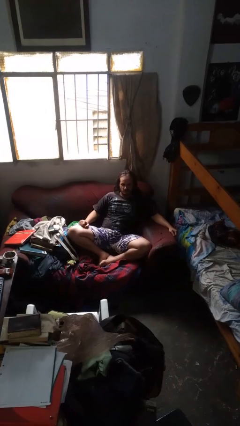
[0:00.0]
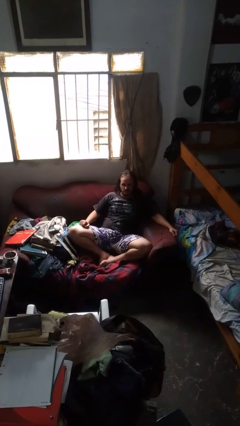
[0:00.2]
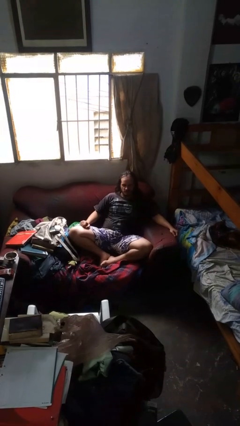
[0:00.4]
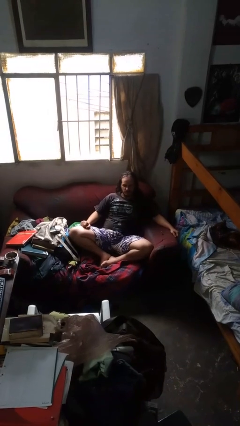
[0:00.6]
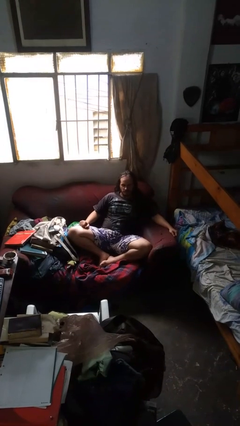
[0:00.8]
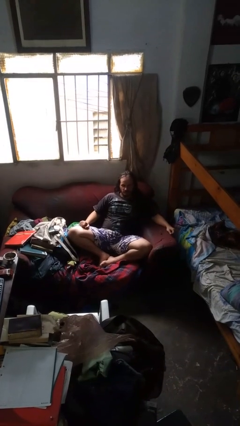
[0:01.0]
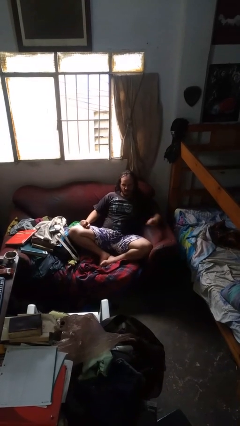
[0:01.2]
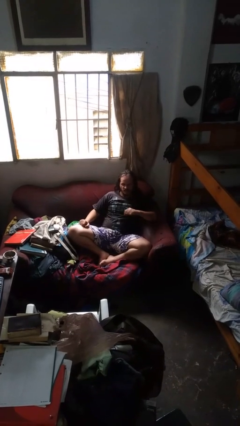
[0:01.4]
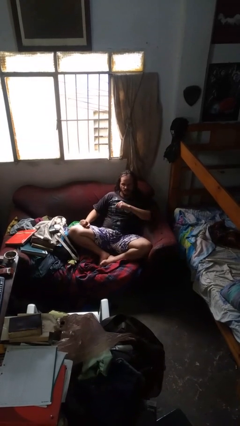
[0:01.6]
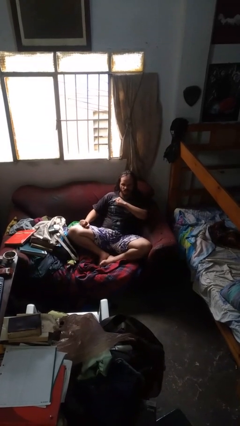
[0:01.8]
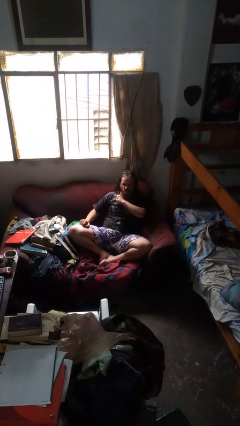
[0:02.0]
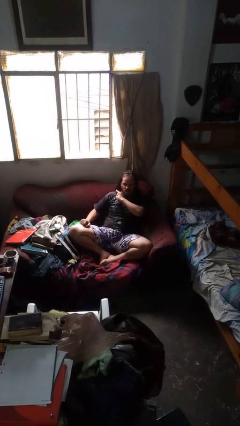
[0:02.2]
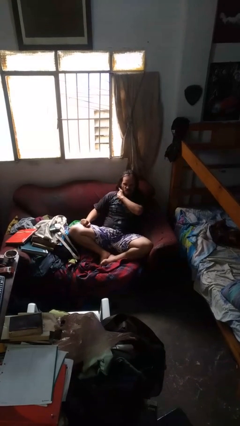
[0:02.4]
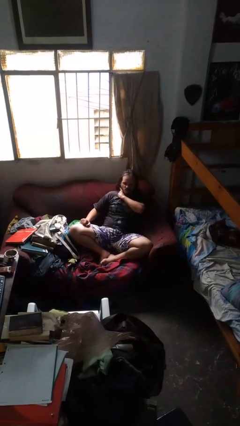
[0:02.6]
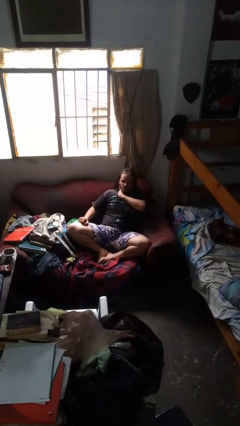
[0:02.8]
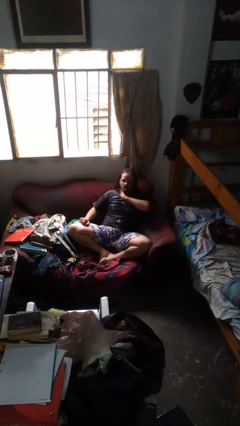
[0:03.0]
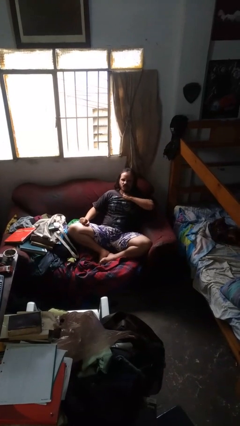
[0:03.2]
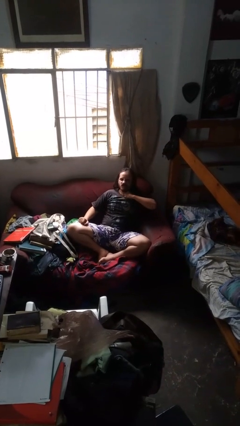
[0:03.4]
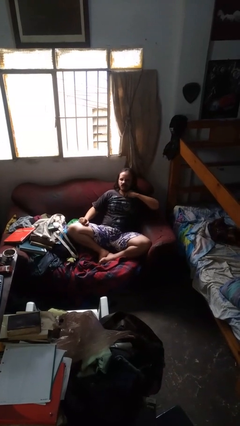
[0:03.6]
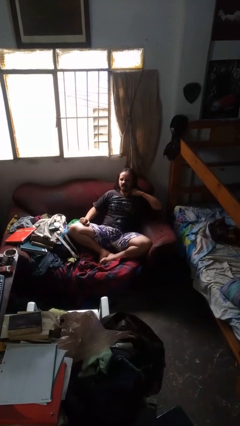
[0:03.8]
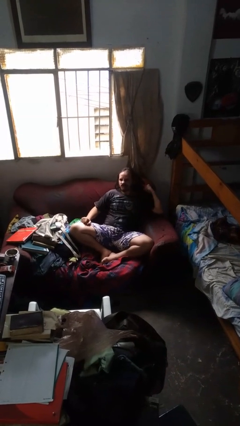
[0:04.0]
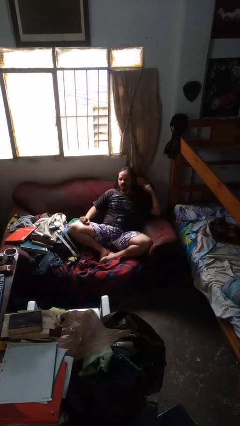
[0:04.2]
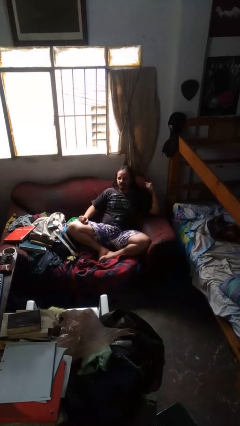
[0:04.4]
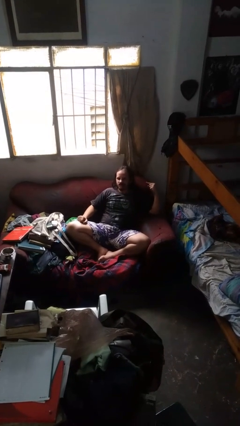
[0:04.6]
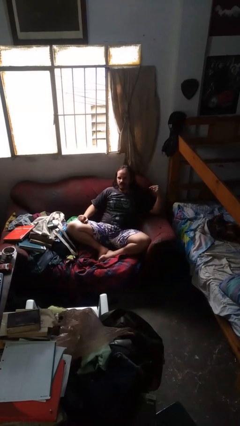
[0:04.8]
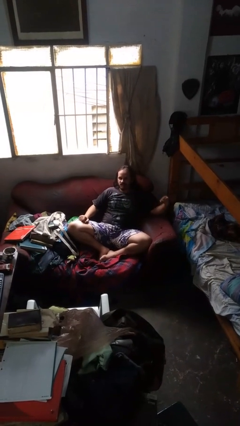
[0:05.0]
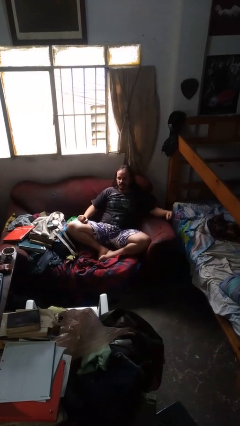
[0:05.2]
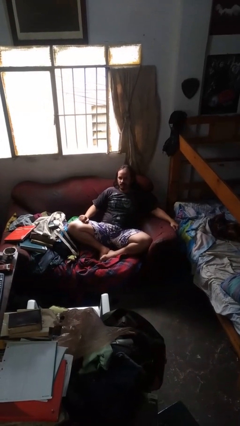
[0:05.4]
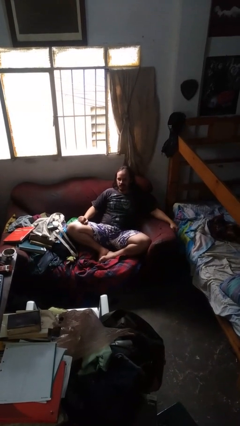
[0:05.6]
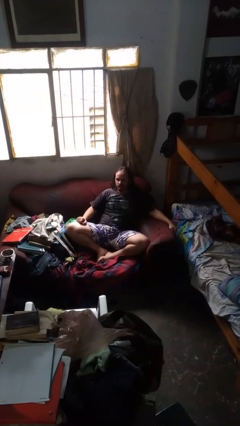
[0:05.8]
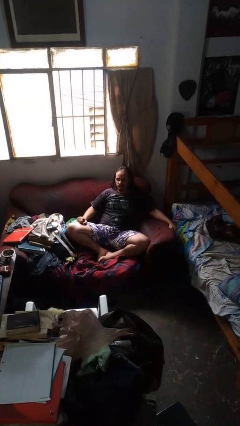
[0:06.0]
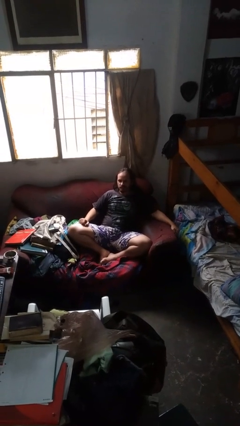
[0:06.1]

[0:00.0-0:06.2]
person gestures cut

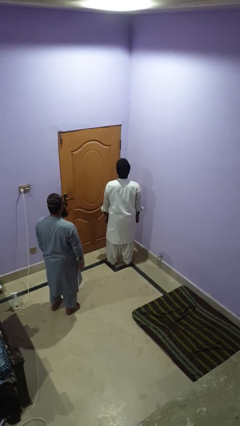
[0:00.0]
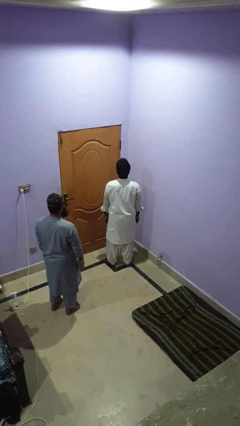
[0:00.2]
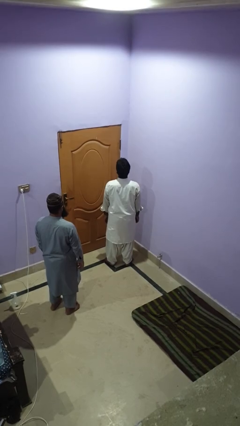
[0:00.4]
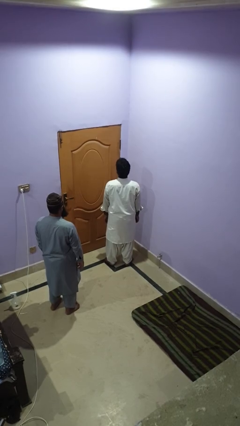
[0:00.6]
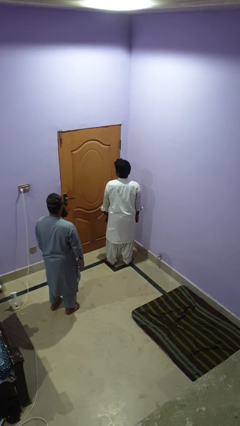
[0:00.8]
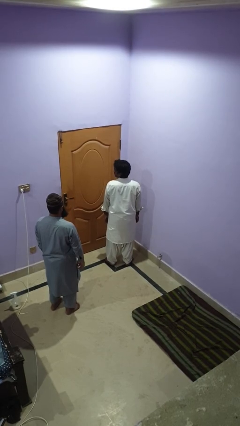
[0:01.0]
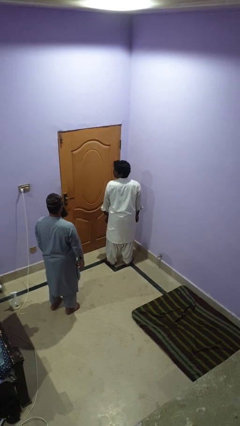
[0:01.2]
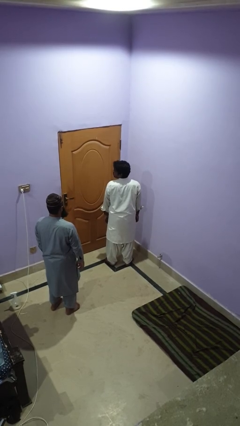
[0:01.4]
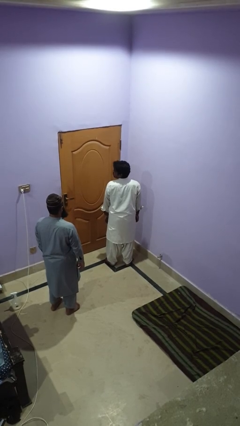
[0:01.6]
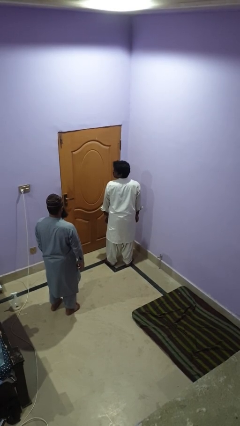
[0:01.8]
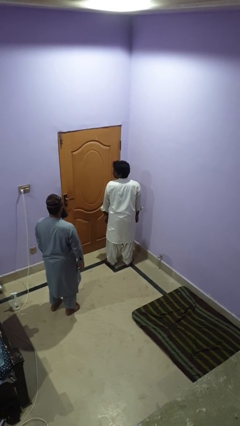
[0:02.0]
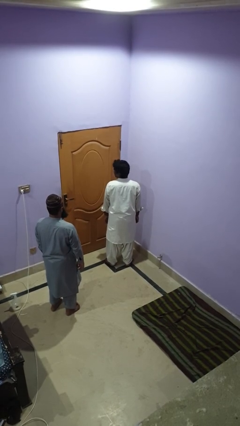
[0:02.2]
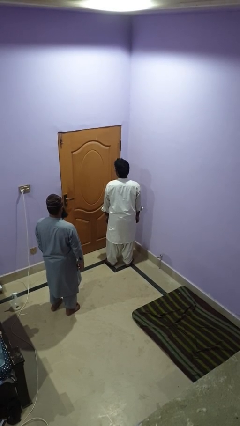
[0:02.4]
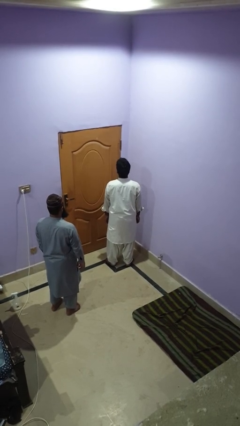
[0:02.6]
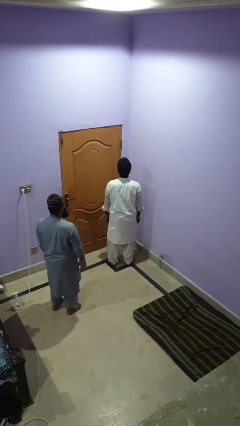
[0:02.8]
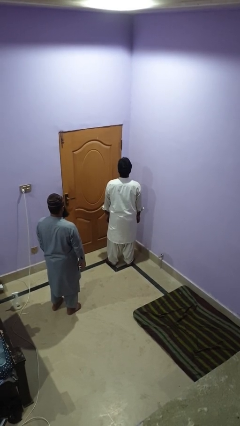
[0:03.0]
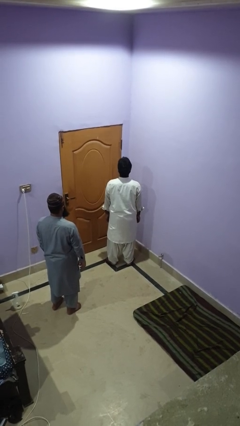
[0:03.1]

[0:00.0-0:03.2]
person looks over shoulder

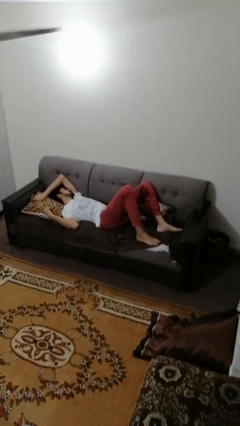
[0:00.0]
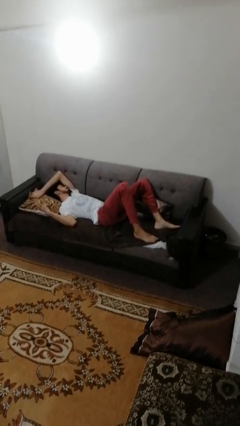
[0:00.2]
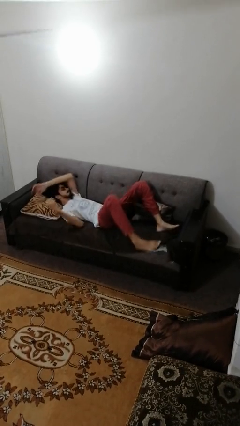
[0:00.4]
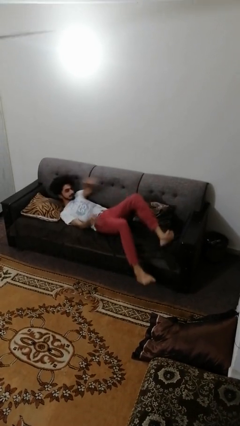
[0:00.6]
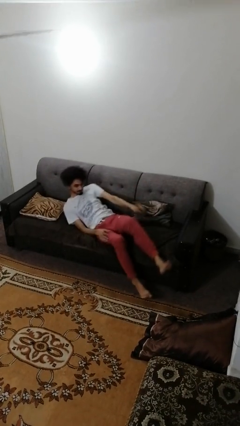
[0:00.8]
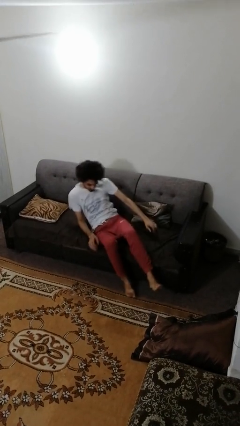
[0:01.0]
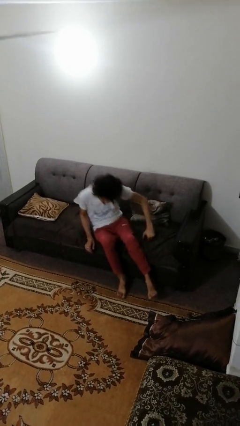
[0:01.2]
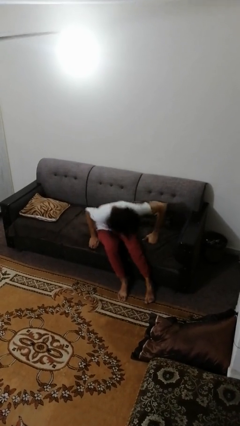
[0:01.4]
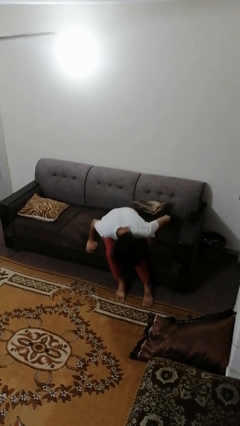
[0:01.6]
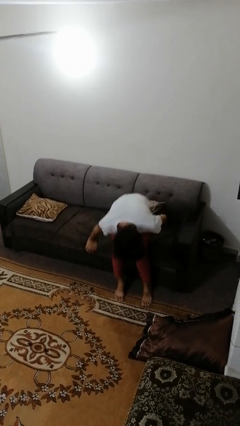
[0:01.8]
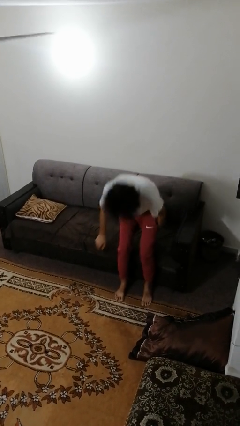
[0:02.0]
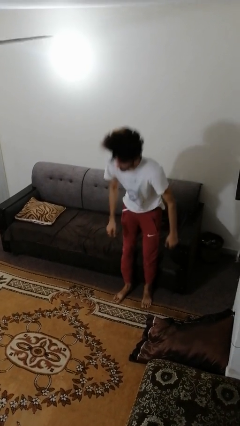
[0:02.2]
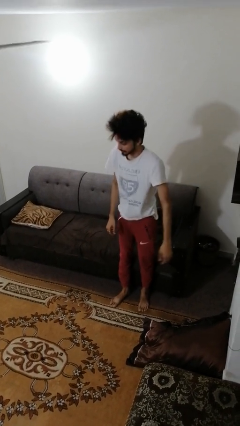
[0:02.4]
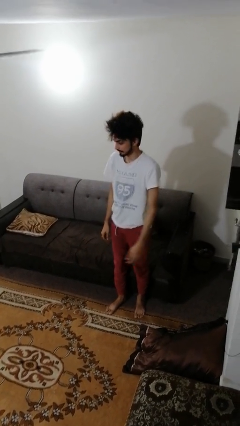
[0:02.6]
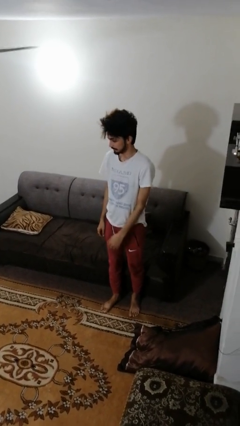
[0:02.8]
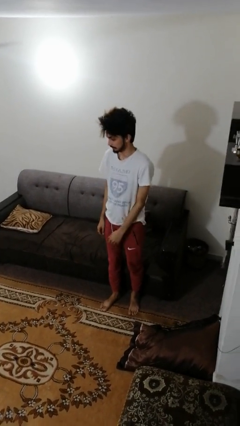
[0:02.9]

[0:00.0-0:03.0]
person stands up

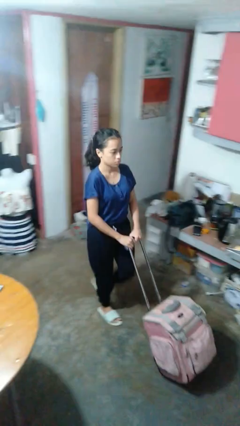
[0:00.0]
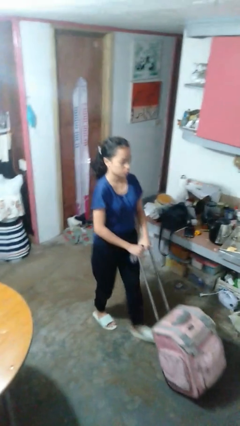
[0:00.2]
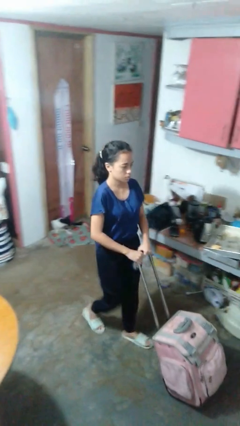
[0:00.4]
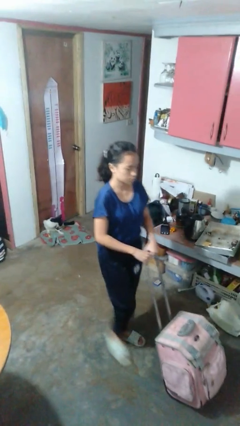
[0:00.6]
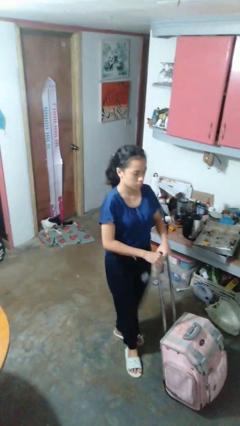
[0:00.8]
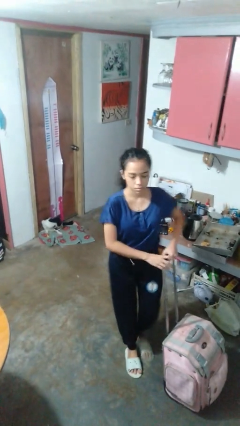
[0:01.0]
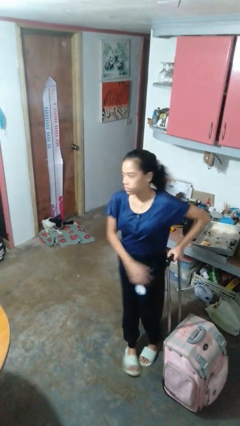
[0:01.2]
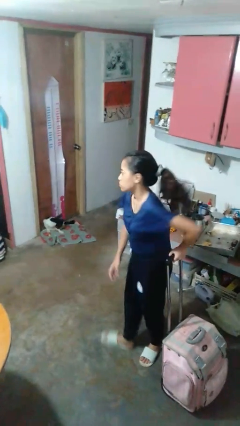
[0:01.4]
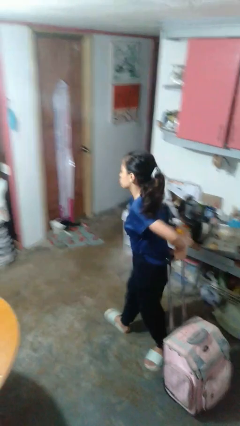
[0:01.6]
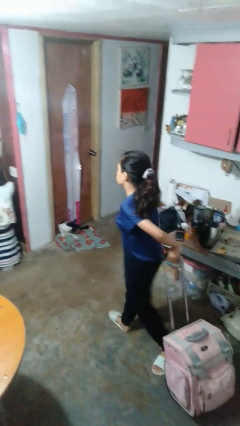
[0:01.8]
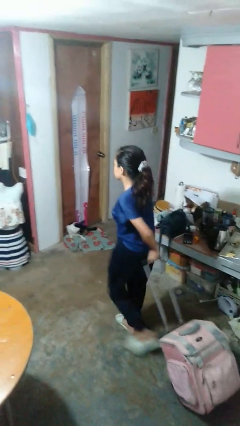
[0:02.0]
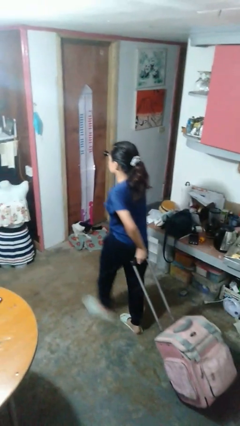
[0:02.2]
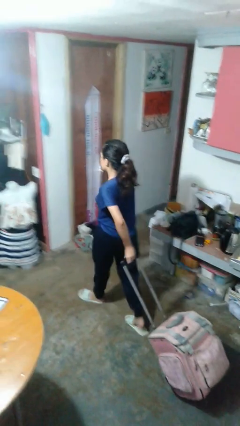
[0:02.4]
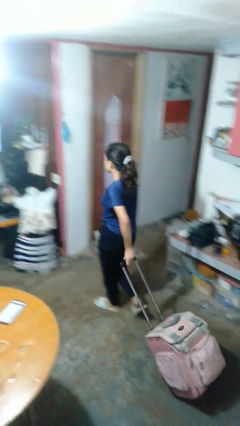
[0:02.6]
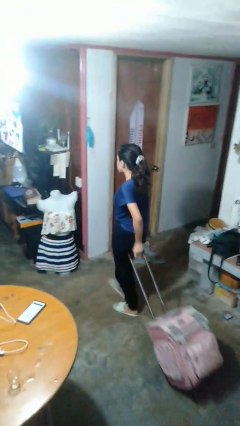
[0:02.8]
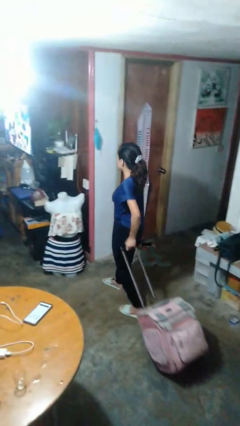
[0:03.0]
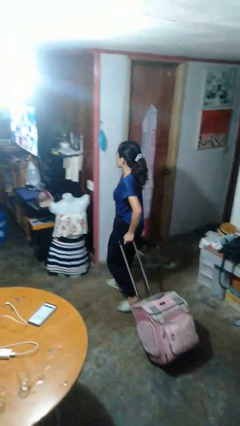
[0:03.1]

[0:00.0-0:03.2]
person pulls wheeled cart

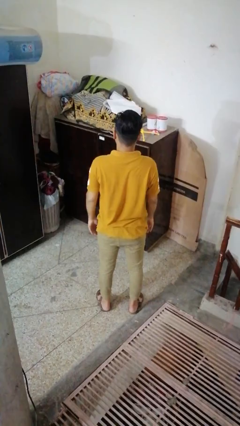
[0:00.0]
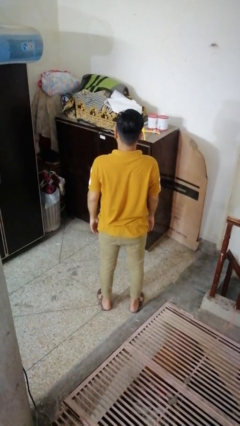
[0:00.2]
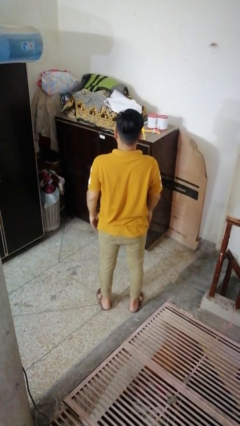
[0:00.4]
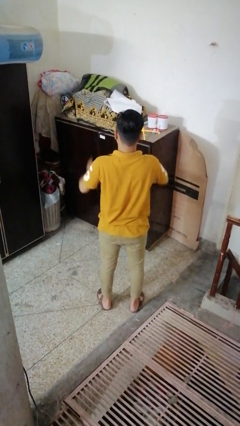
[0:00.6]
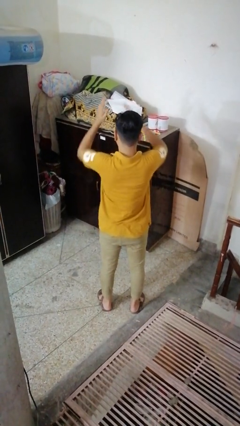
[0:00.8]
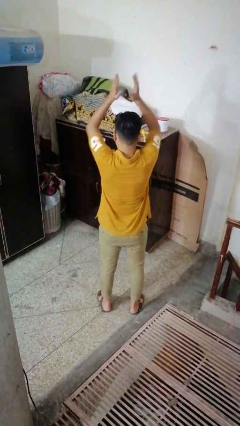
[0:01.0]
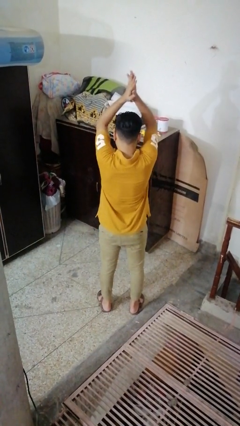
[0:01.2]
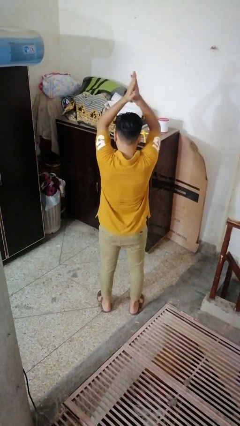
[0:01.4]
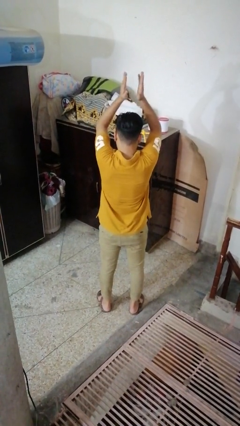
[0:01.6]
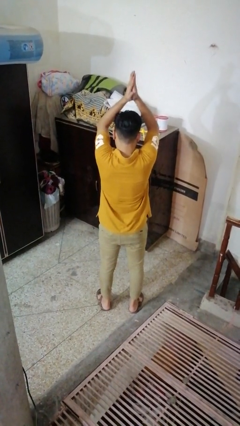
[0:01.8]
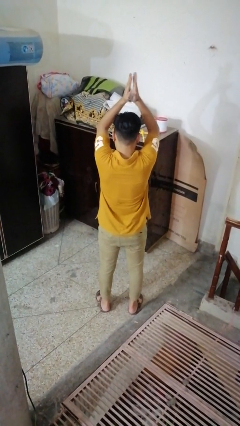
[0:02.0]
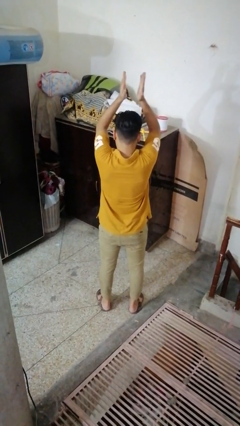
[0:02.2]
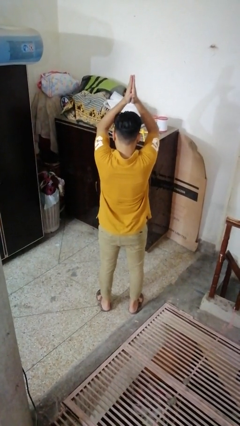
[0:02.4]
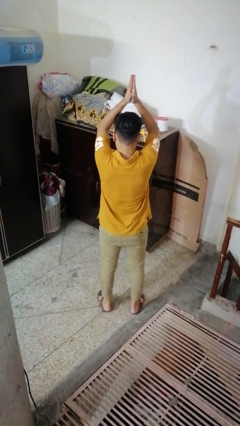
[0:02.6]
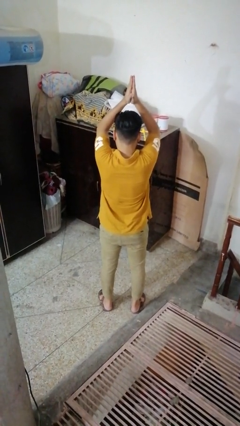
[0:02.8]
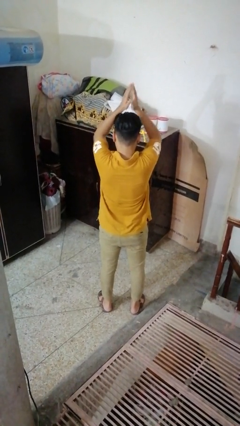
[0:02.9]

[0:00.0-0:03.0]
person claps hands
